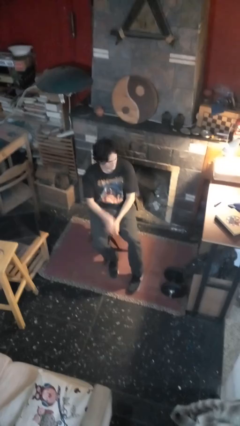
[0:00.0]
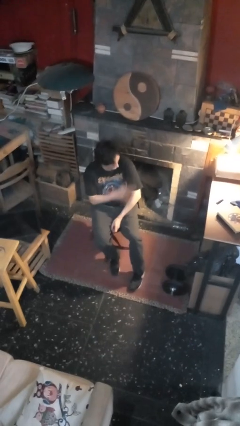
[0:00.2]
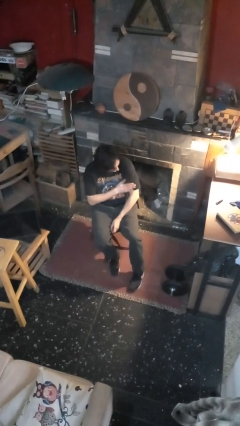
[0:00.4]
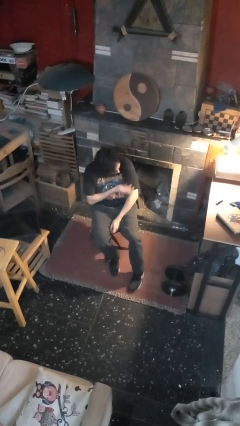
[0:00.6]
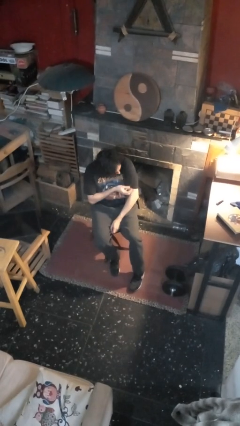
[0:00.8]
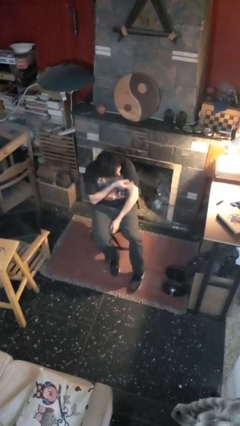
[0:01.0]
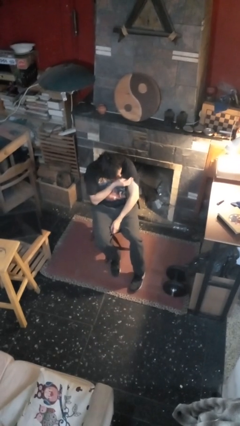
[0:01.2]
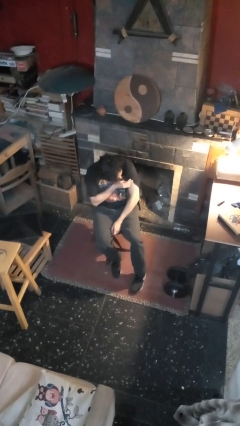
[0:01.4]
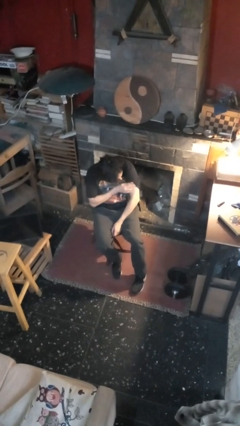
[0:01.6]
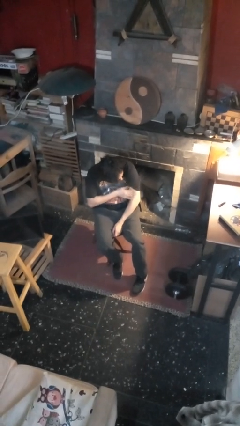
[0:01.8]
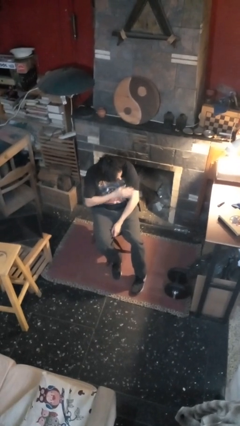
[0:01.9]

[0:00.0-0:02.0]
person swats bug

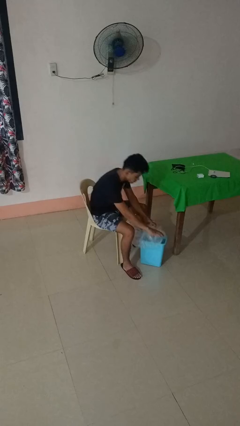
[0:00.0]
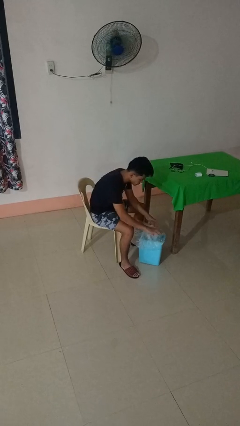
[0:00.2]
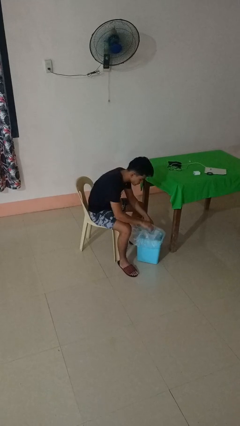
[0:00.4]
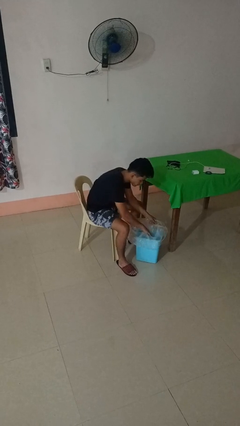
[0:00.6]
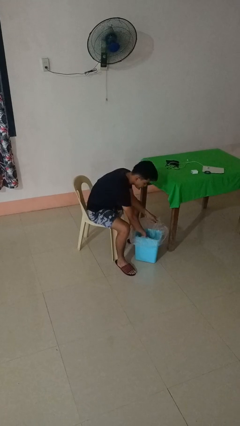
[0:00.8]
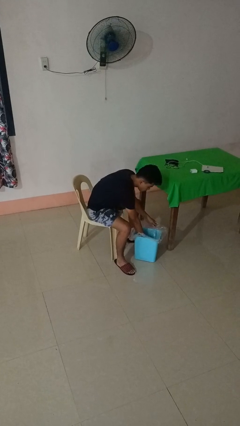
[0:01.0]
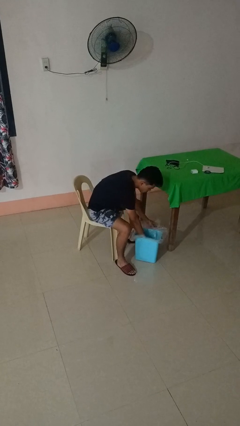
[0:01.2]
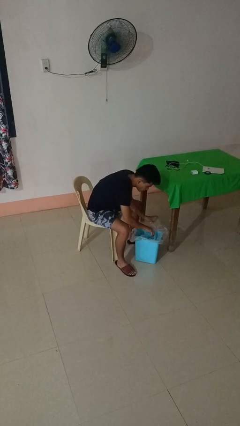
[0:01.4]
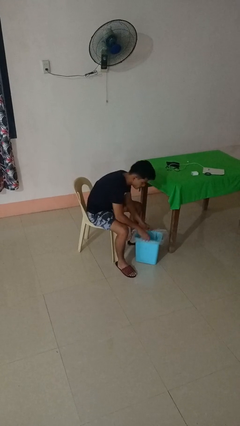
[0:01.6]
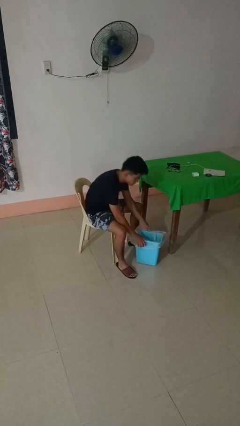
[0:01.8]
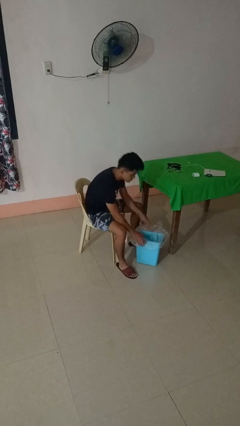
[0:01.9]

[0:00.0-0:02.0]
person inserts trashbag into trashcan

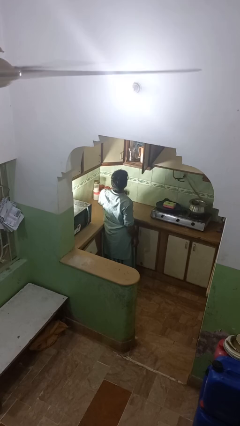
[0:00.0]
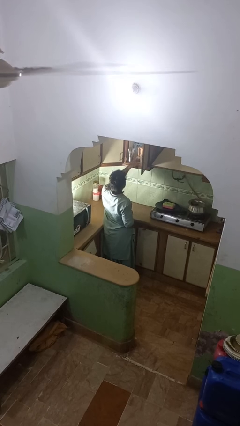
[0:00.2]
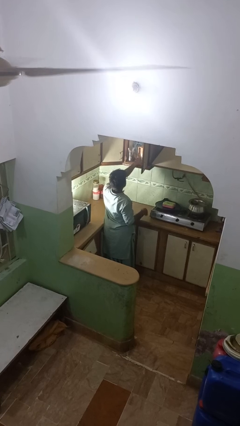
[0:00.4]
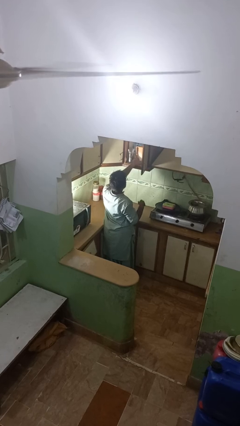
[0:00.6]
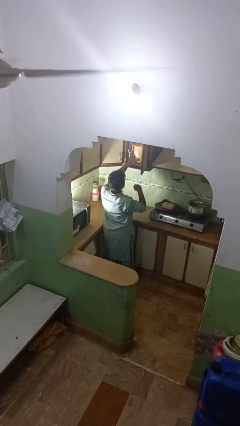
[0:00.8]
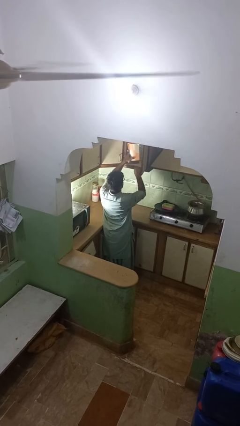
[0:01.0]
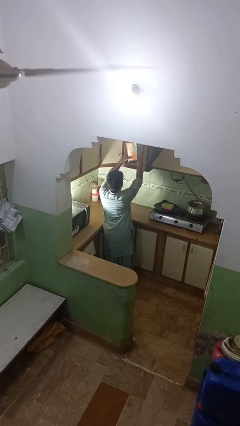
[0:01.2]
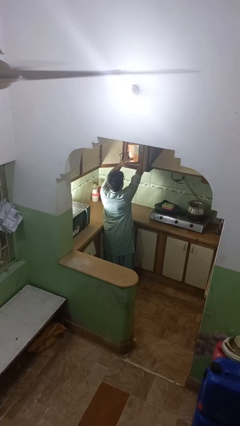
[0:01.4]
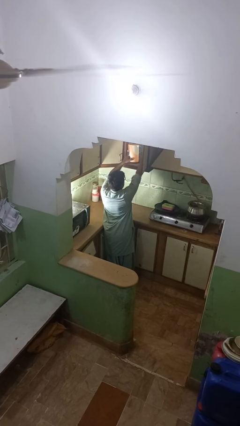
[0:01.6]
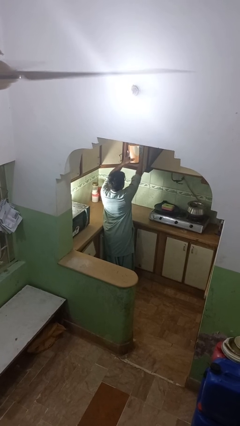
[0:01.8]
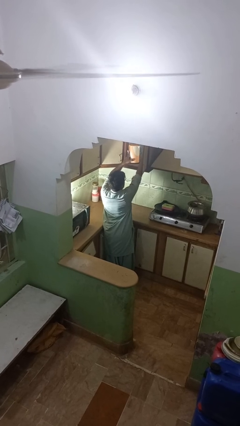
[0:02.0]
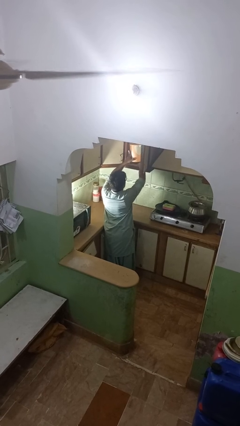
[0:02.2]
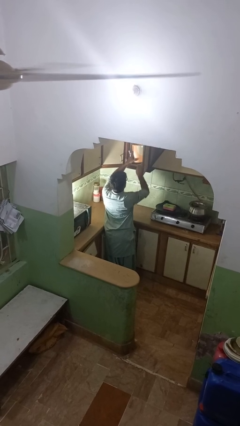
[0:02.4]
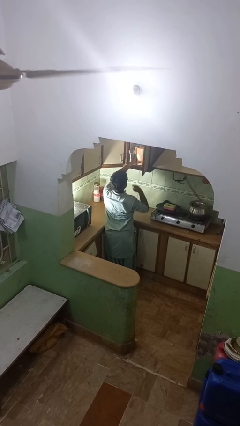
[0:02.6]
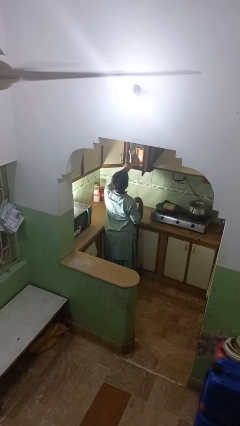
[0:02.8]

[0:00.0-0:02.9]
person searches in kitchen drawer

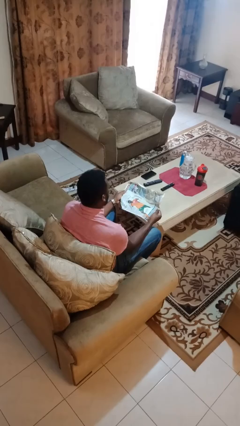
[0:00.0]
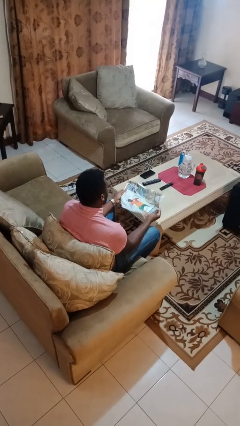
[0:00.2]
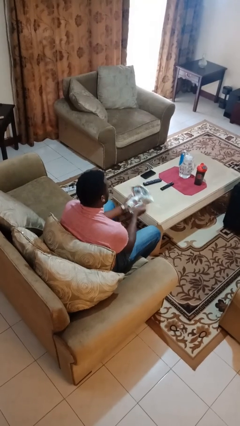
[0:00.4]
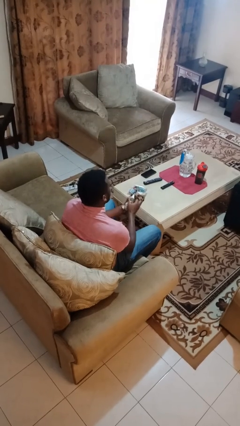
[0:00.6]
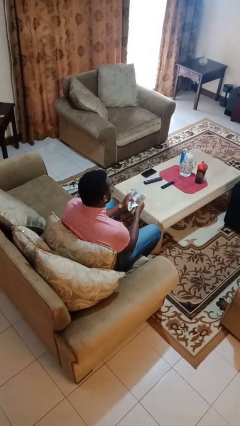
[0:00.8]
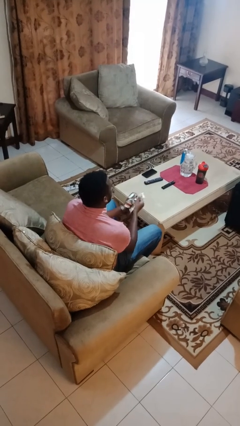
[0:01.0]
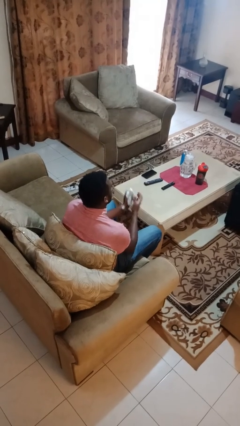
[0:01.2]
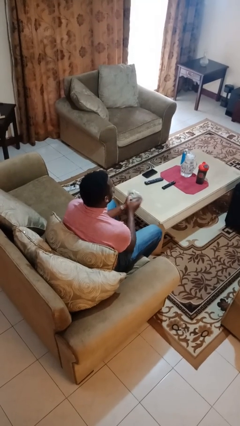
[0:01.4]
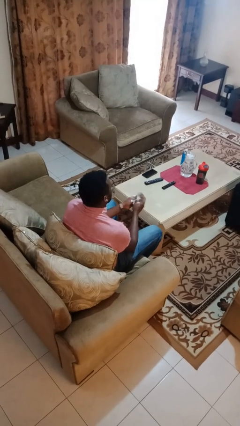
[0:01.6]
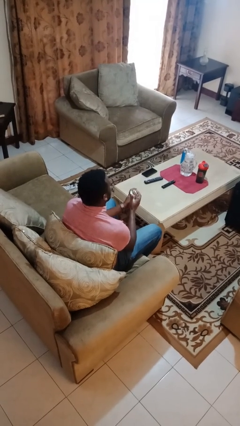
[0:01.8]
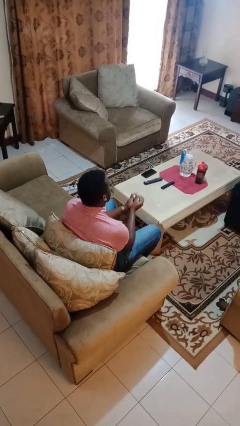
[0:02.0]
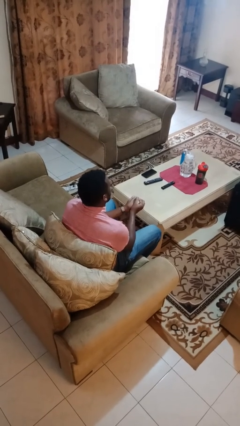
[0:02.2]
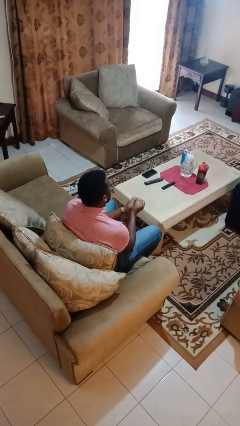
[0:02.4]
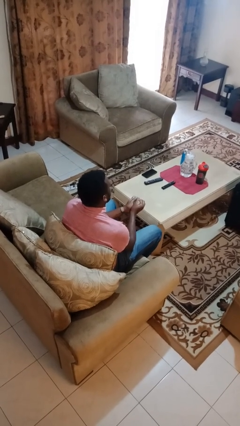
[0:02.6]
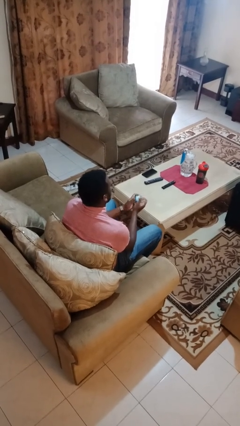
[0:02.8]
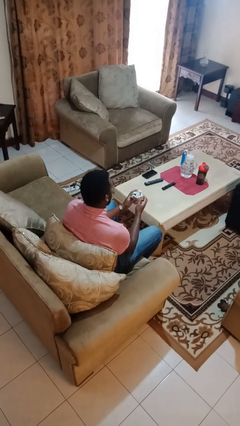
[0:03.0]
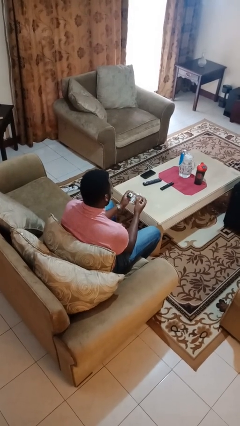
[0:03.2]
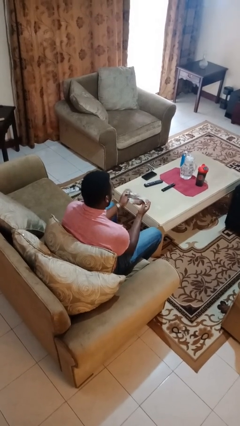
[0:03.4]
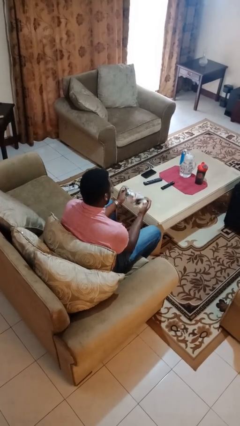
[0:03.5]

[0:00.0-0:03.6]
person crumples paper

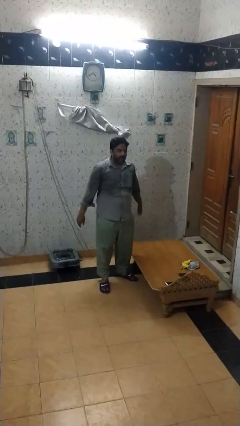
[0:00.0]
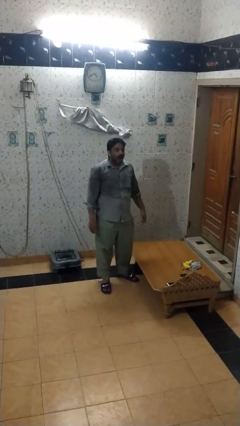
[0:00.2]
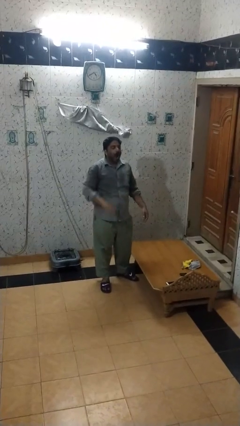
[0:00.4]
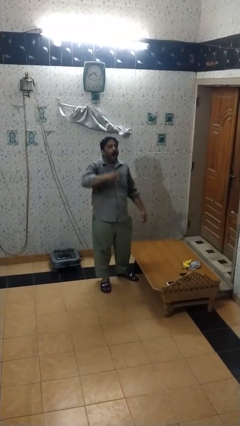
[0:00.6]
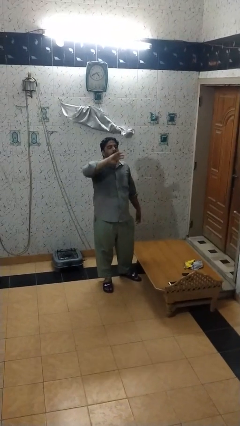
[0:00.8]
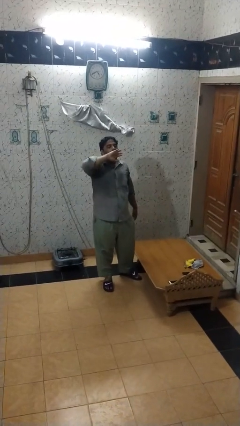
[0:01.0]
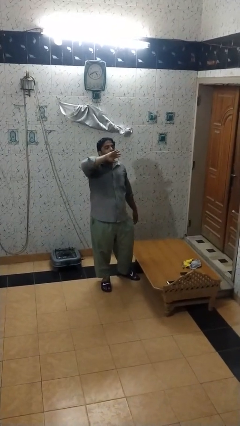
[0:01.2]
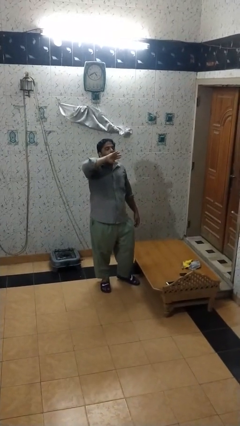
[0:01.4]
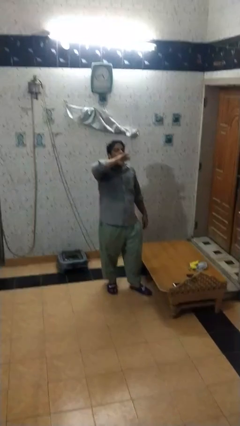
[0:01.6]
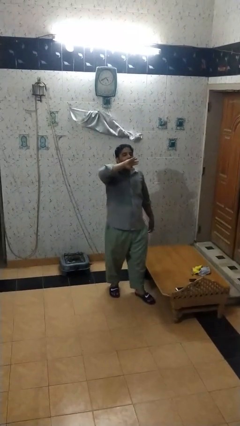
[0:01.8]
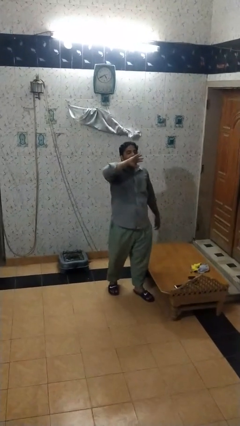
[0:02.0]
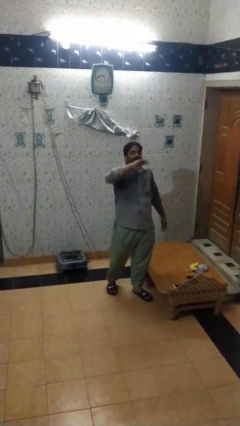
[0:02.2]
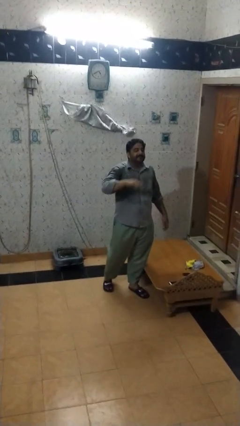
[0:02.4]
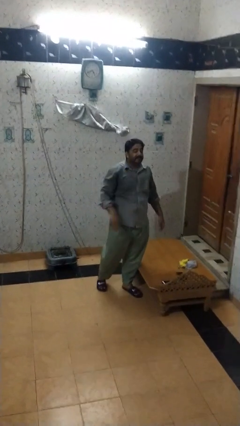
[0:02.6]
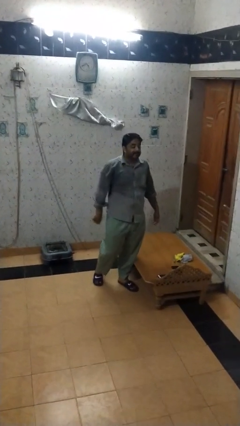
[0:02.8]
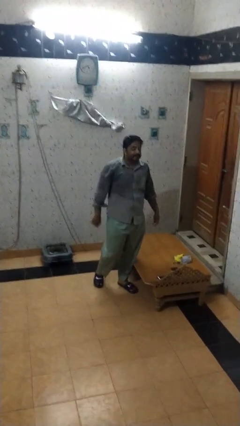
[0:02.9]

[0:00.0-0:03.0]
person yawns

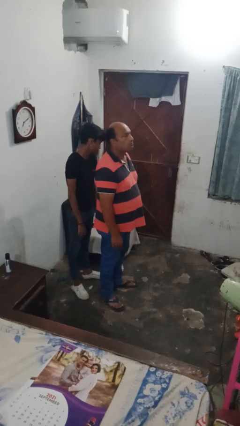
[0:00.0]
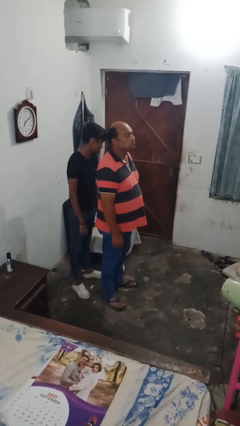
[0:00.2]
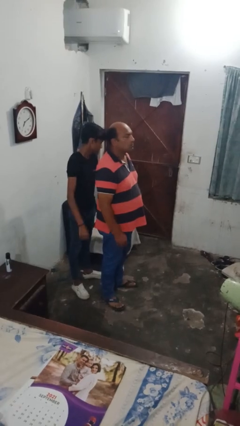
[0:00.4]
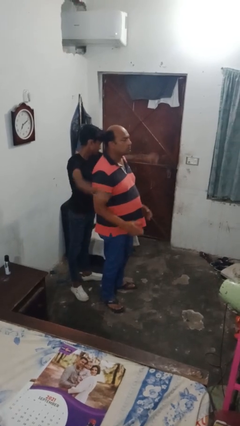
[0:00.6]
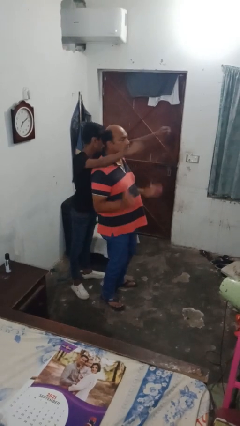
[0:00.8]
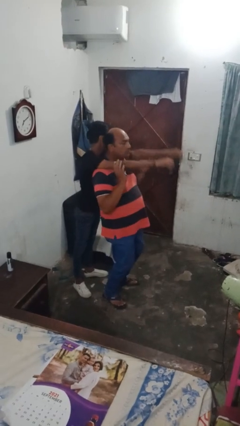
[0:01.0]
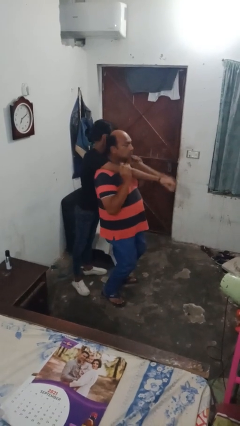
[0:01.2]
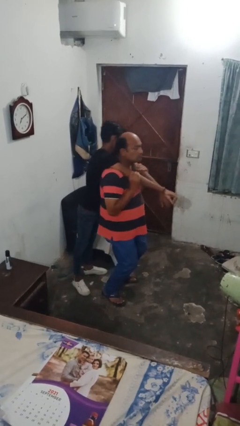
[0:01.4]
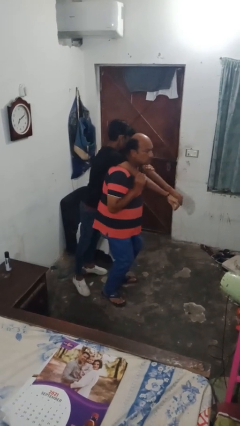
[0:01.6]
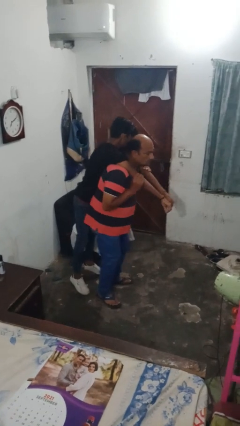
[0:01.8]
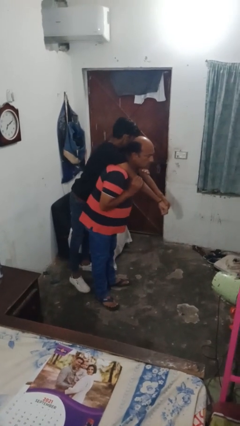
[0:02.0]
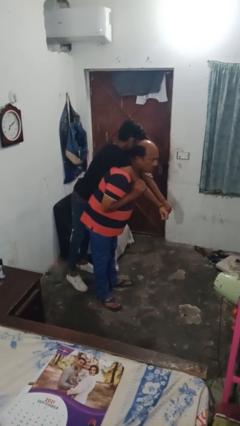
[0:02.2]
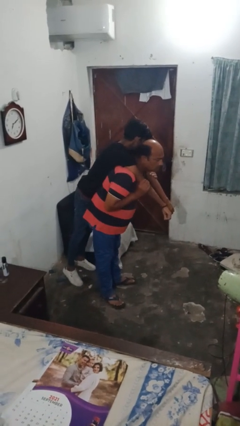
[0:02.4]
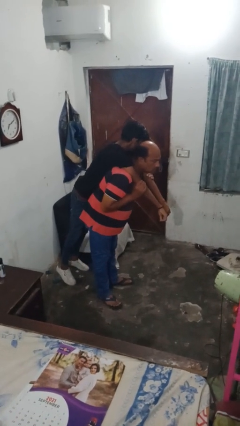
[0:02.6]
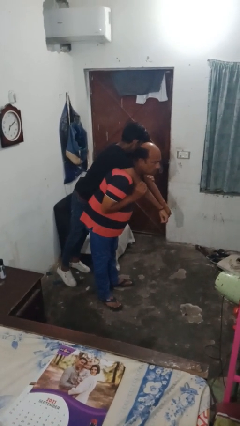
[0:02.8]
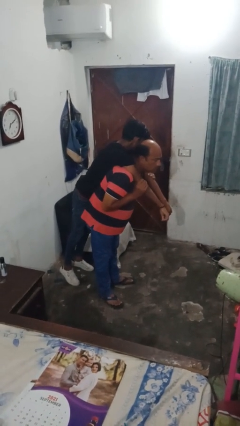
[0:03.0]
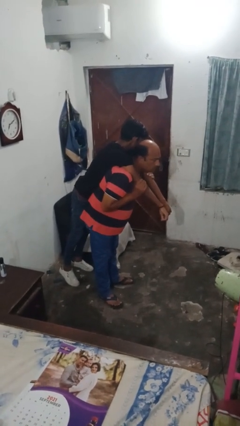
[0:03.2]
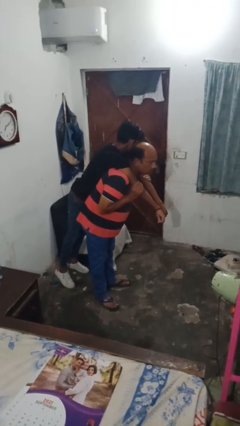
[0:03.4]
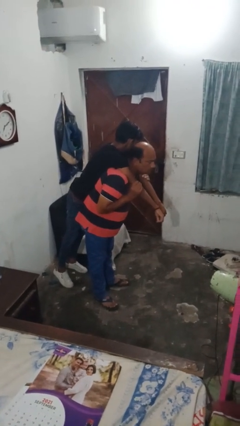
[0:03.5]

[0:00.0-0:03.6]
person carries person on shoulders

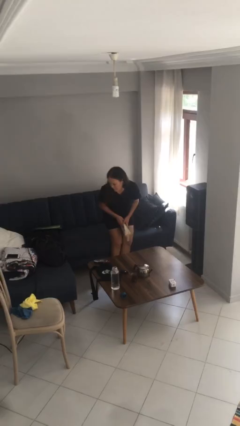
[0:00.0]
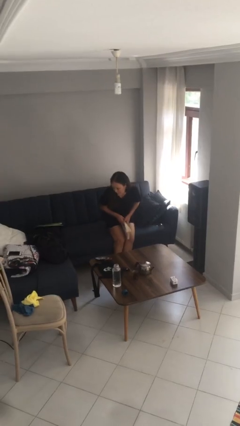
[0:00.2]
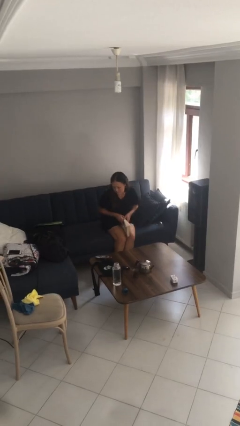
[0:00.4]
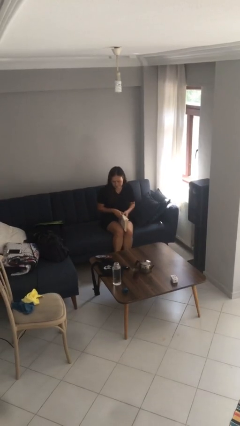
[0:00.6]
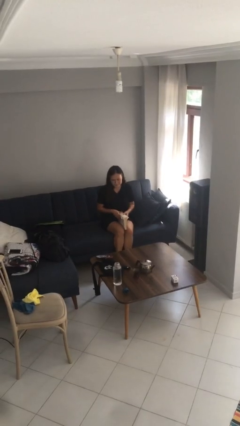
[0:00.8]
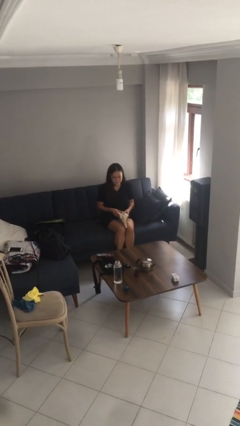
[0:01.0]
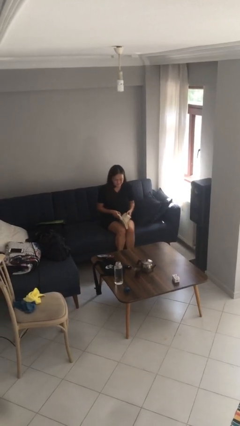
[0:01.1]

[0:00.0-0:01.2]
person sits down
